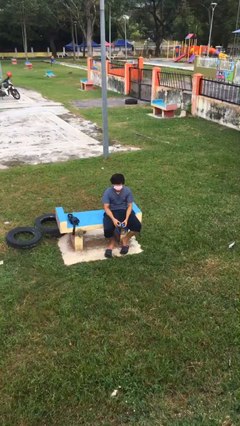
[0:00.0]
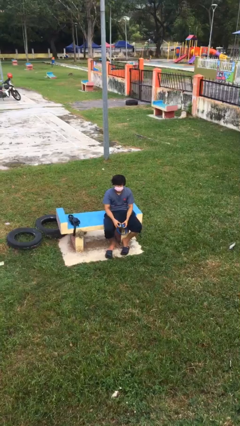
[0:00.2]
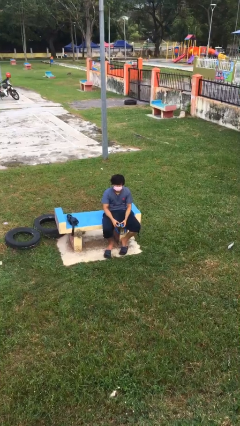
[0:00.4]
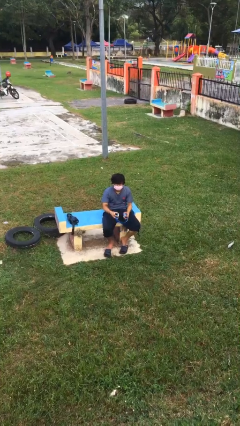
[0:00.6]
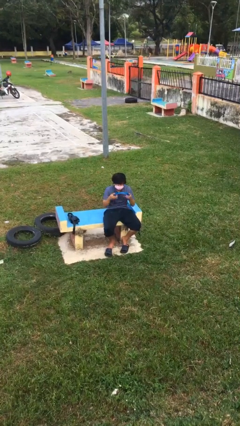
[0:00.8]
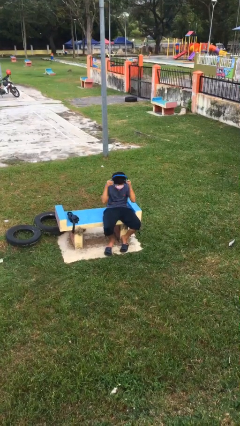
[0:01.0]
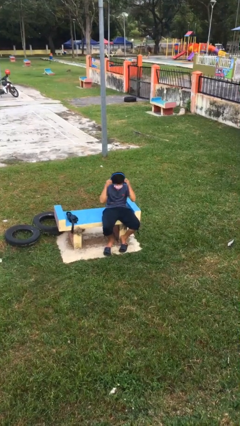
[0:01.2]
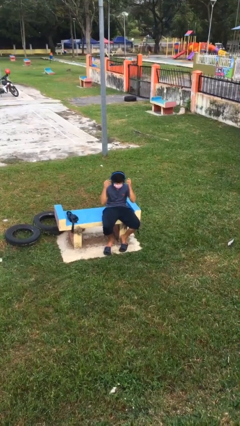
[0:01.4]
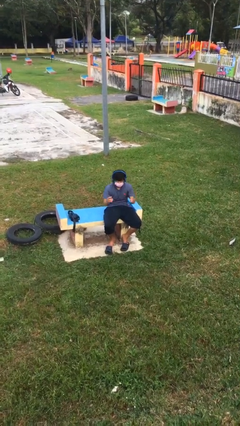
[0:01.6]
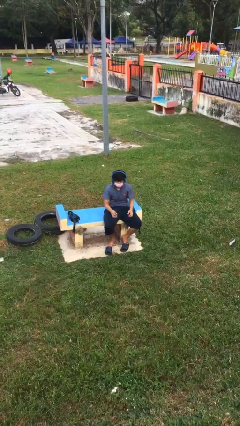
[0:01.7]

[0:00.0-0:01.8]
person puts on headphones

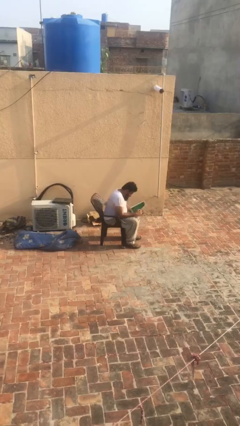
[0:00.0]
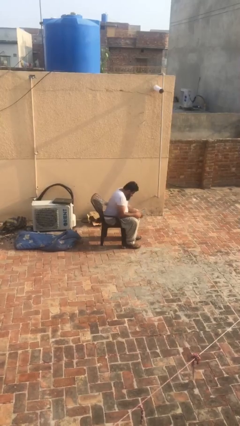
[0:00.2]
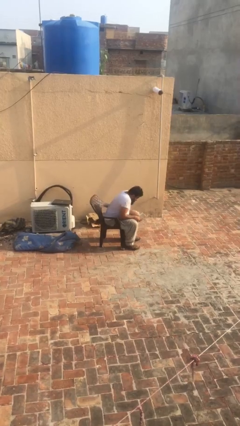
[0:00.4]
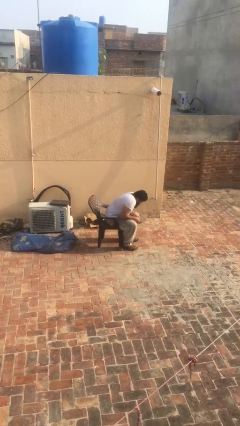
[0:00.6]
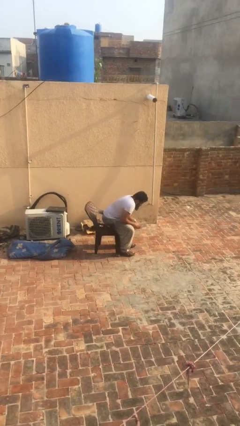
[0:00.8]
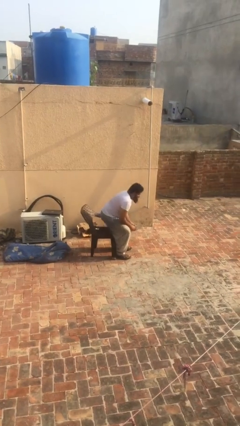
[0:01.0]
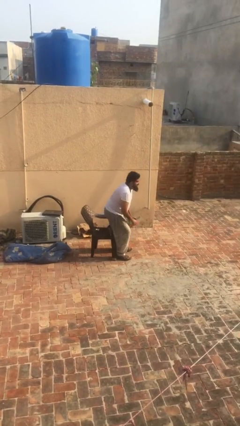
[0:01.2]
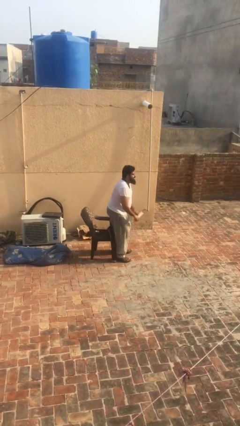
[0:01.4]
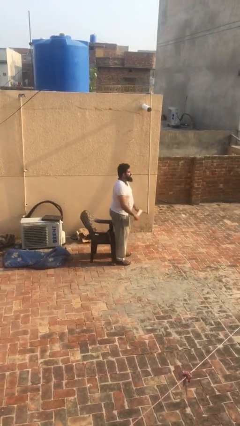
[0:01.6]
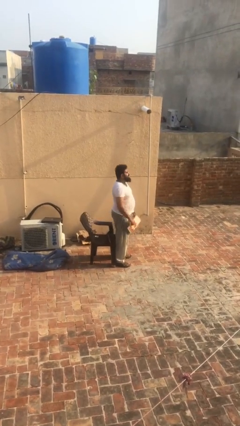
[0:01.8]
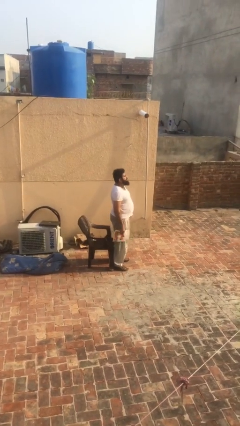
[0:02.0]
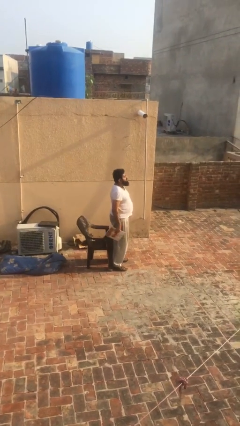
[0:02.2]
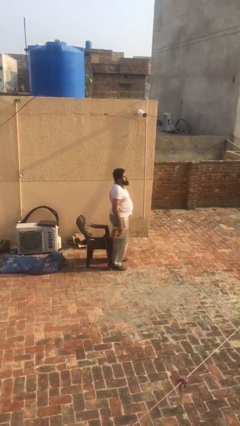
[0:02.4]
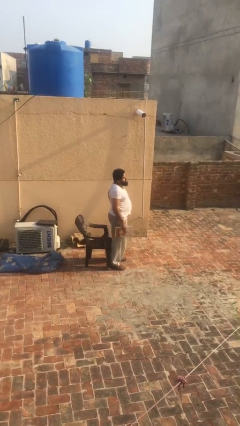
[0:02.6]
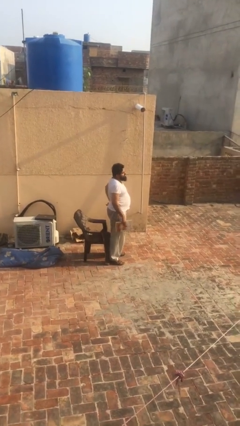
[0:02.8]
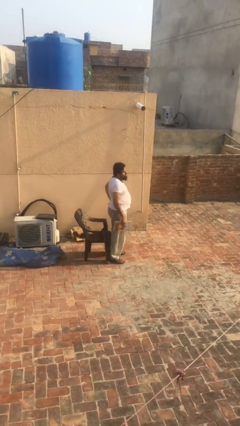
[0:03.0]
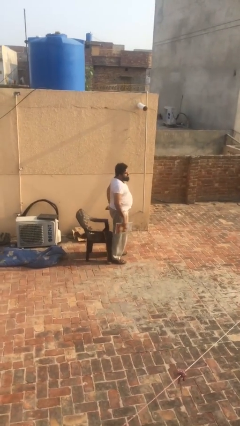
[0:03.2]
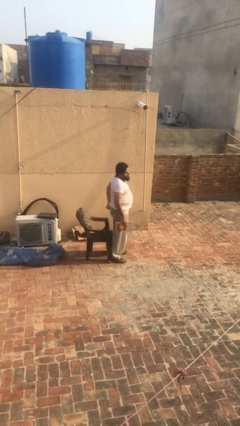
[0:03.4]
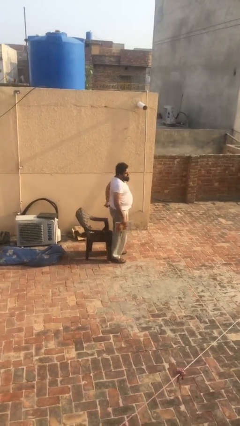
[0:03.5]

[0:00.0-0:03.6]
person stands up

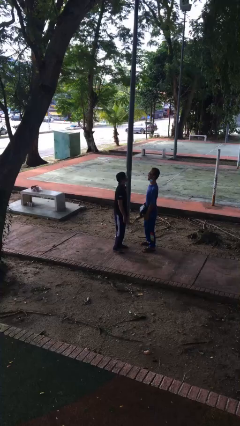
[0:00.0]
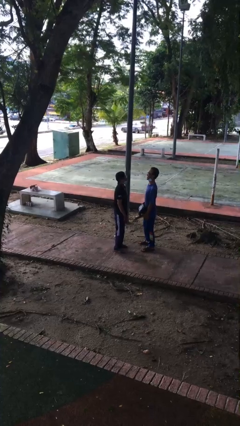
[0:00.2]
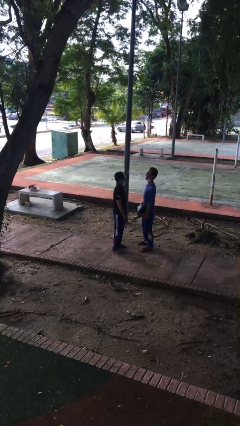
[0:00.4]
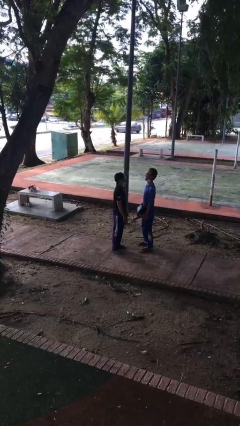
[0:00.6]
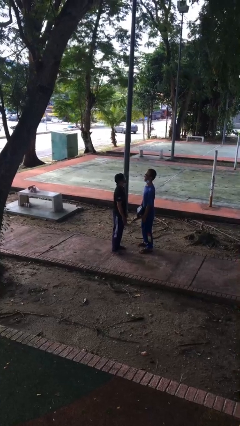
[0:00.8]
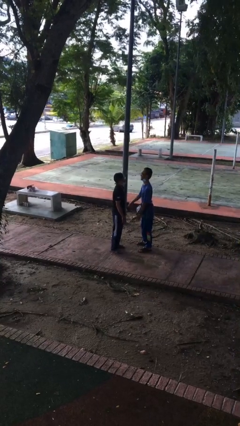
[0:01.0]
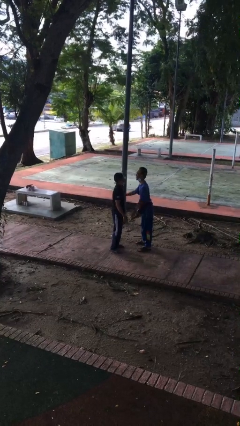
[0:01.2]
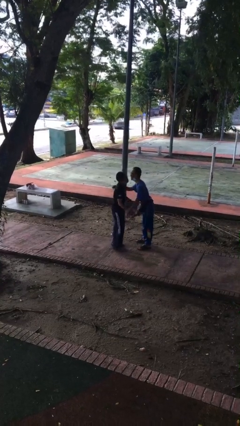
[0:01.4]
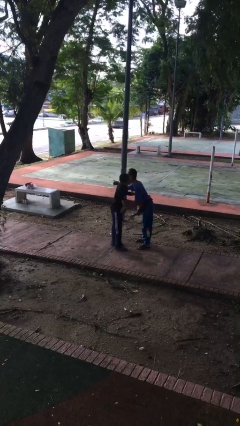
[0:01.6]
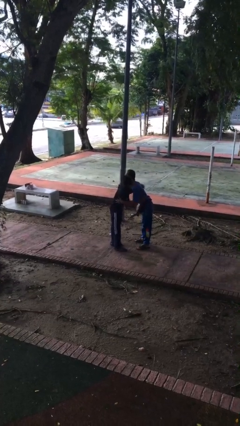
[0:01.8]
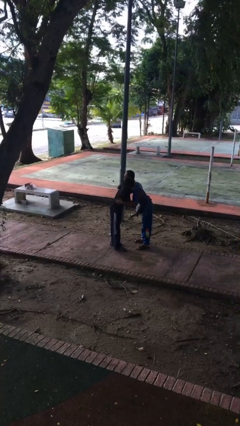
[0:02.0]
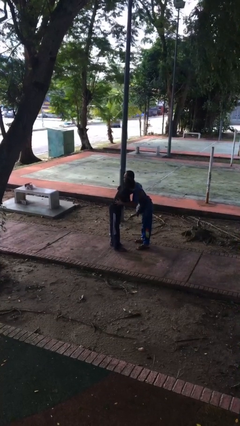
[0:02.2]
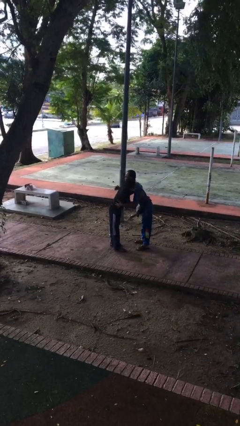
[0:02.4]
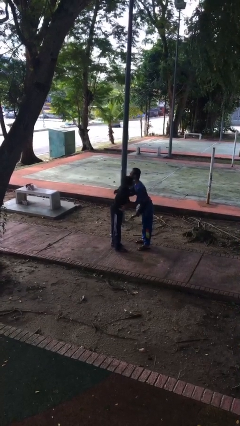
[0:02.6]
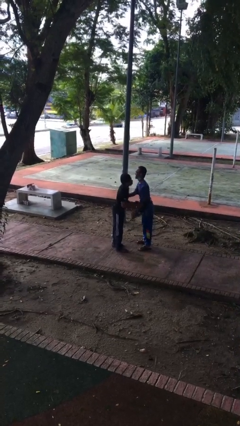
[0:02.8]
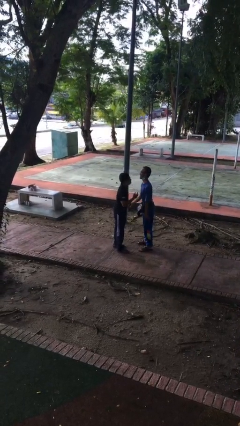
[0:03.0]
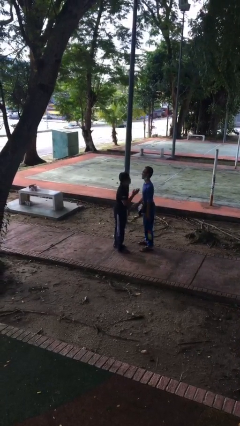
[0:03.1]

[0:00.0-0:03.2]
person embraces person

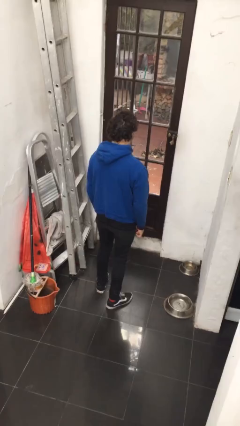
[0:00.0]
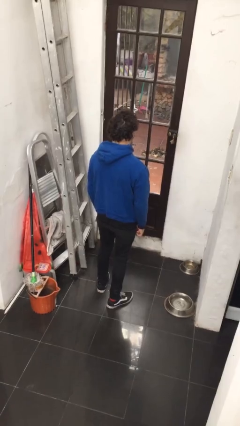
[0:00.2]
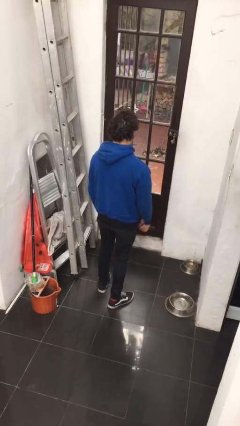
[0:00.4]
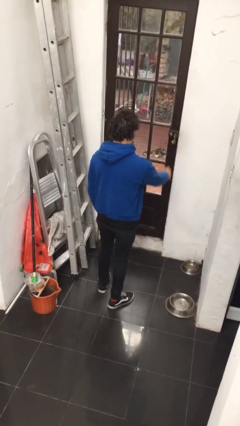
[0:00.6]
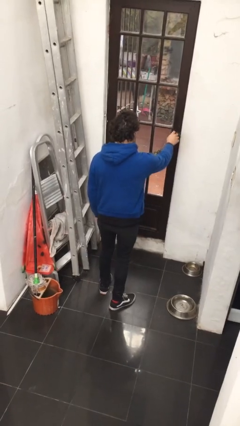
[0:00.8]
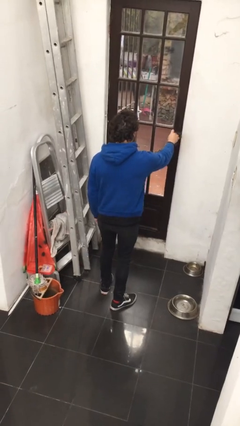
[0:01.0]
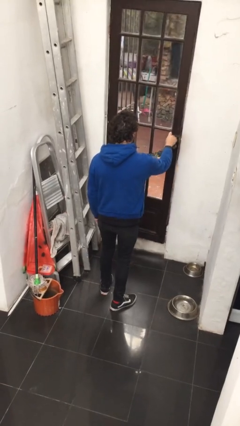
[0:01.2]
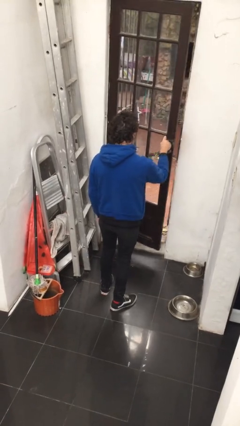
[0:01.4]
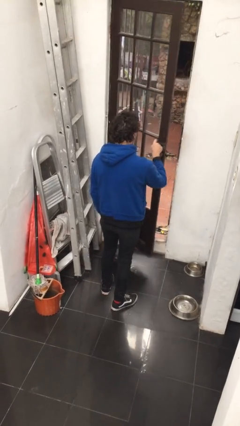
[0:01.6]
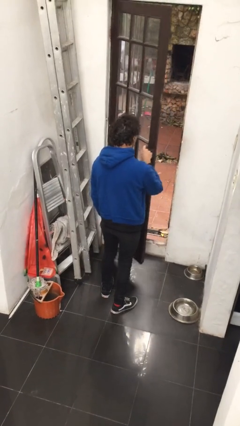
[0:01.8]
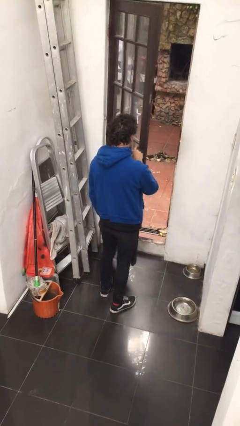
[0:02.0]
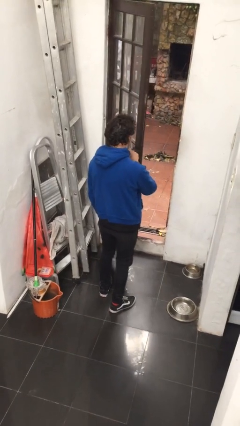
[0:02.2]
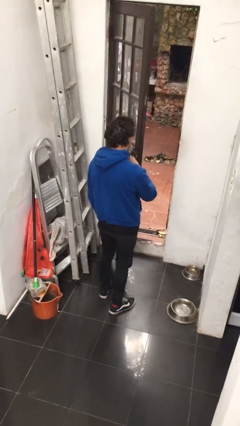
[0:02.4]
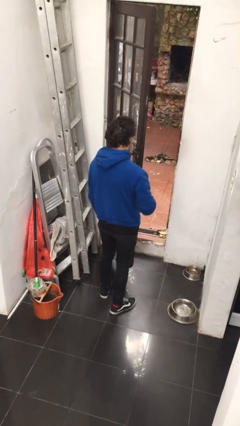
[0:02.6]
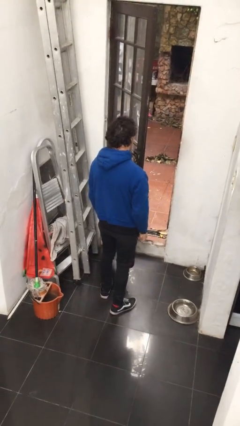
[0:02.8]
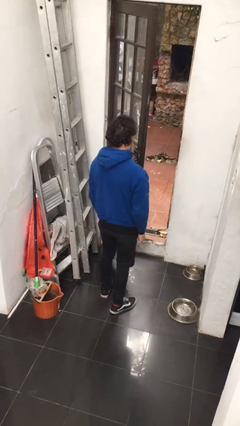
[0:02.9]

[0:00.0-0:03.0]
person opens facility door

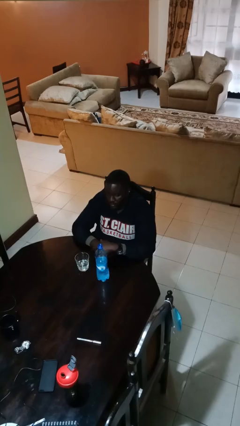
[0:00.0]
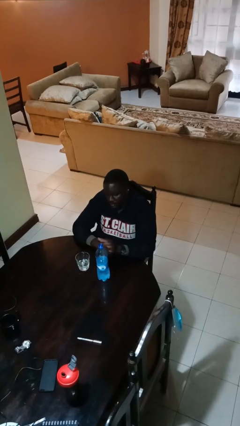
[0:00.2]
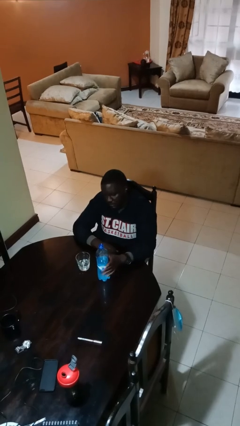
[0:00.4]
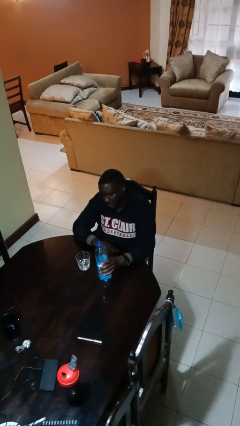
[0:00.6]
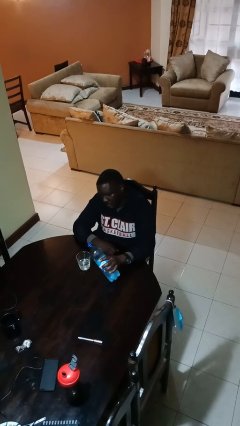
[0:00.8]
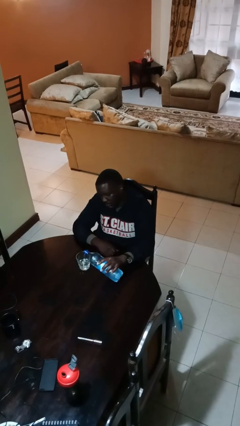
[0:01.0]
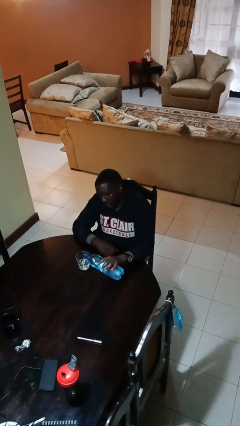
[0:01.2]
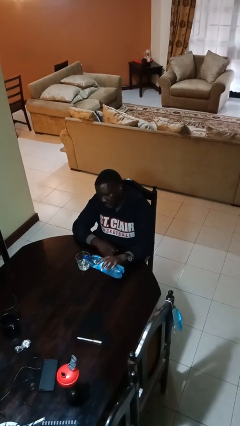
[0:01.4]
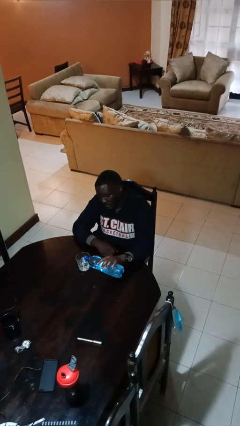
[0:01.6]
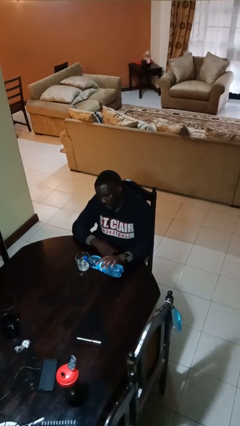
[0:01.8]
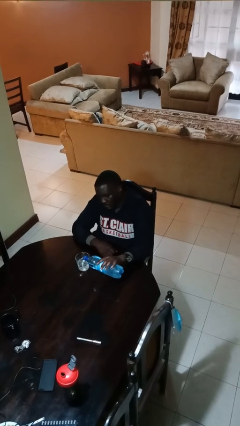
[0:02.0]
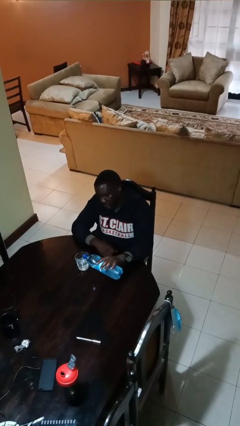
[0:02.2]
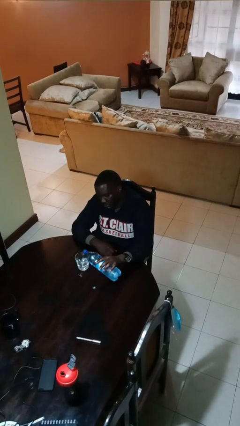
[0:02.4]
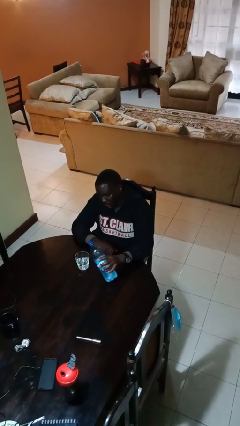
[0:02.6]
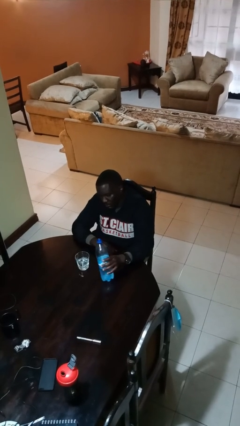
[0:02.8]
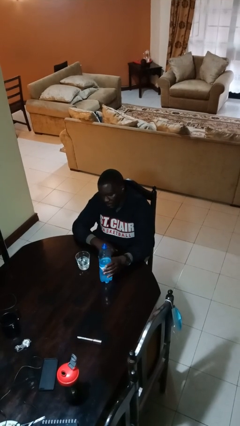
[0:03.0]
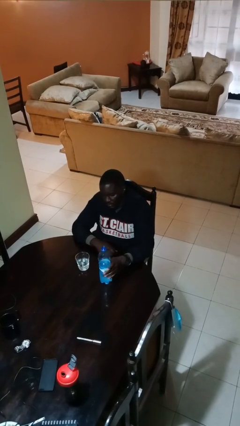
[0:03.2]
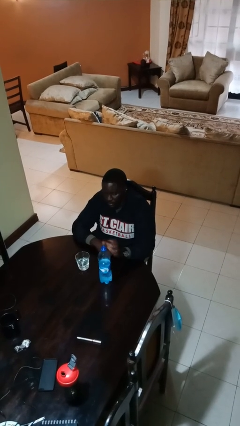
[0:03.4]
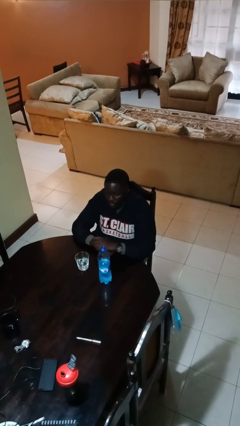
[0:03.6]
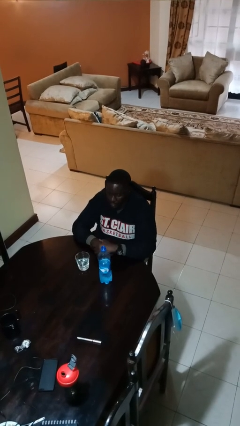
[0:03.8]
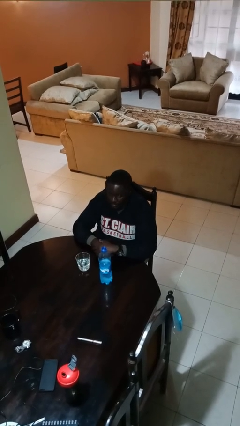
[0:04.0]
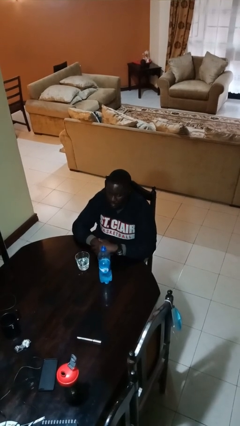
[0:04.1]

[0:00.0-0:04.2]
person pours liquid into cup

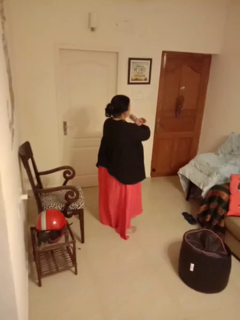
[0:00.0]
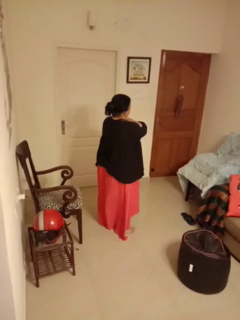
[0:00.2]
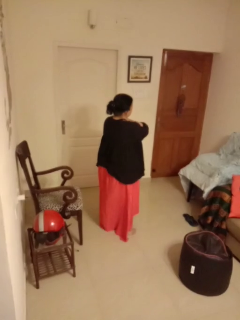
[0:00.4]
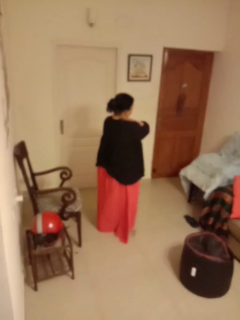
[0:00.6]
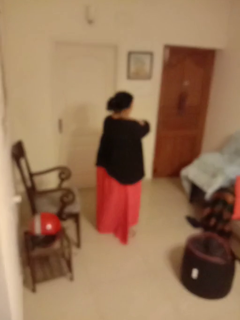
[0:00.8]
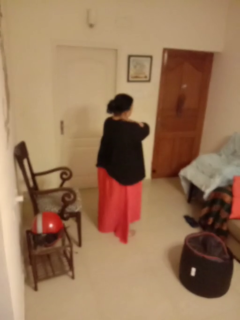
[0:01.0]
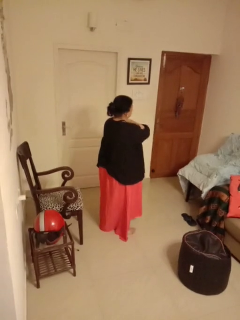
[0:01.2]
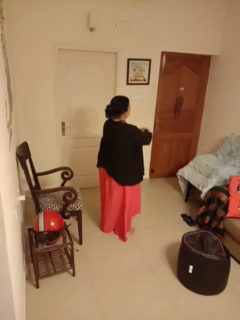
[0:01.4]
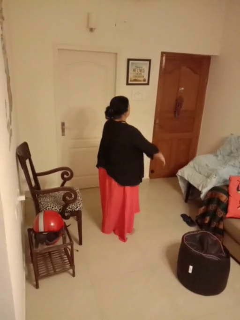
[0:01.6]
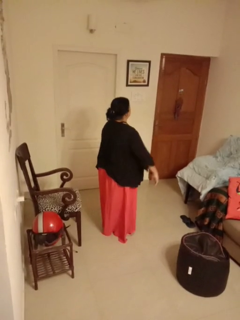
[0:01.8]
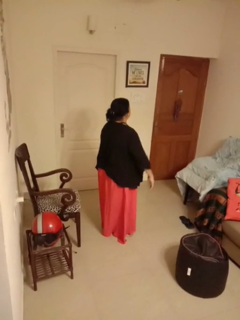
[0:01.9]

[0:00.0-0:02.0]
person gestures arms x
